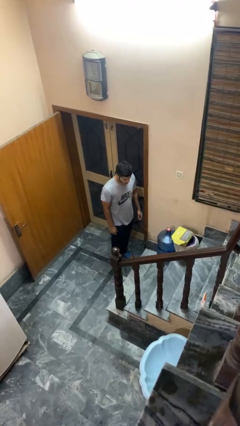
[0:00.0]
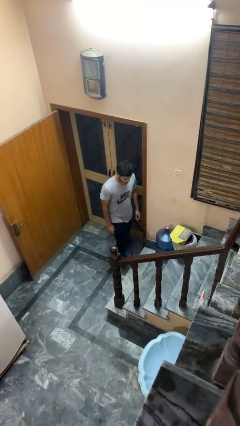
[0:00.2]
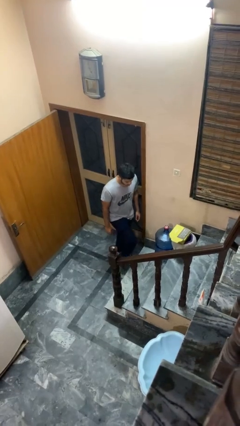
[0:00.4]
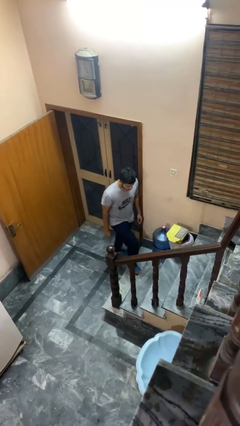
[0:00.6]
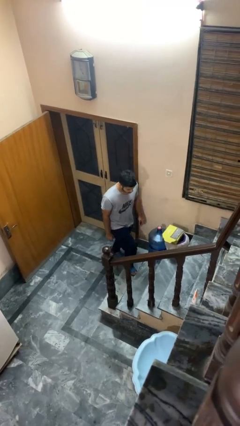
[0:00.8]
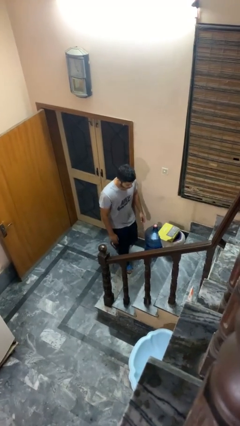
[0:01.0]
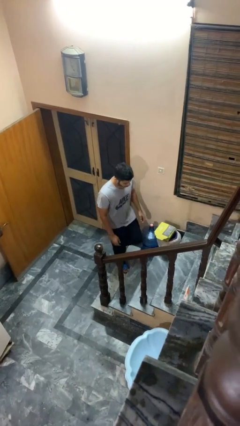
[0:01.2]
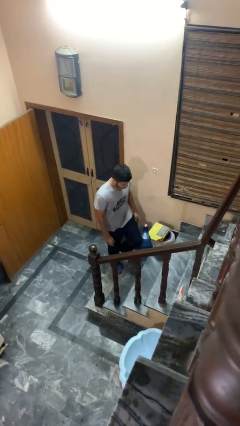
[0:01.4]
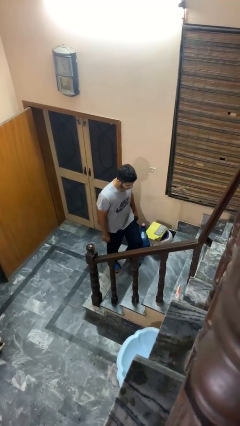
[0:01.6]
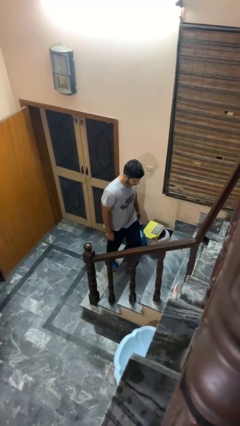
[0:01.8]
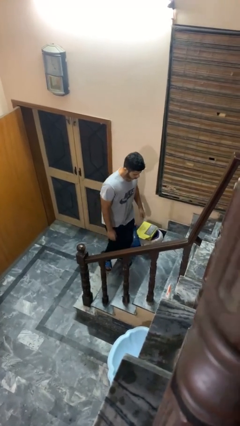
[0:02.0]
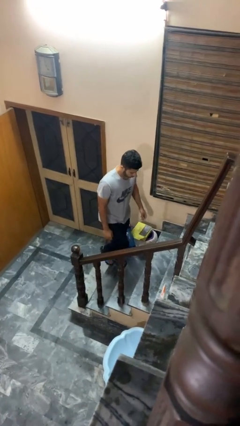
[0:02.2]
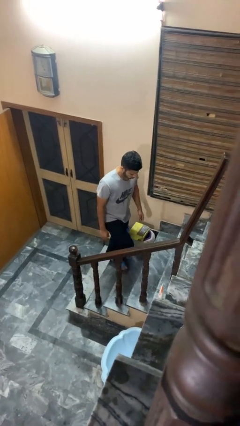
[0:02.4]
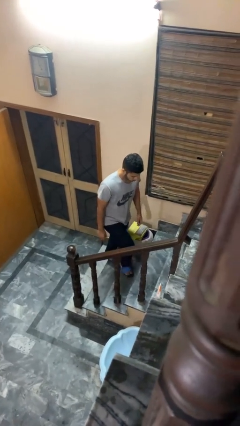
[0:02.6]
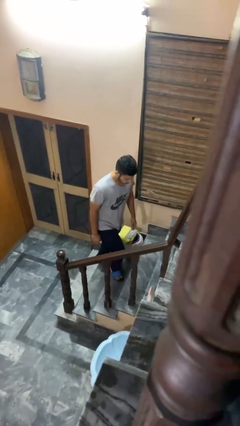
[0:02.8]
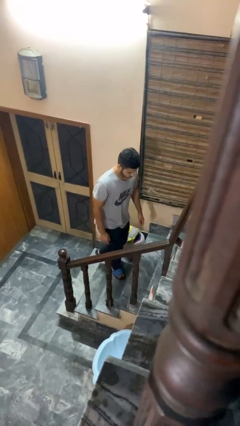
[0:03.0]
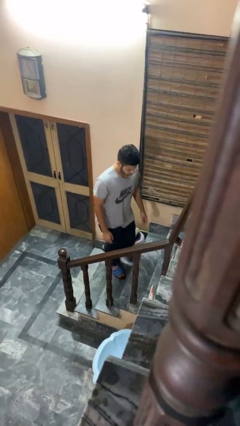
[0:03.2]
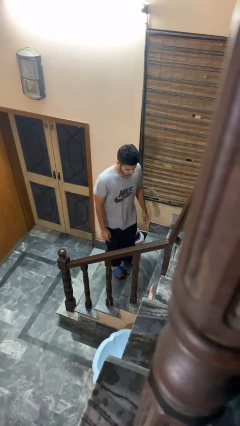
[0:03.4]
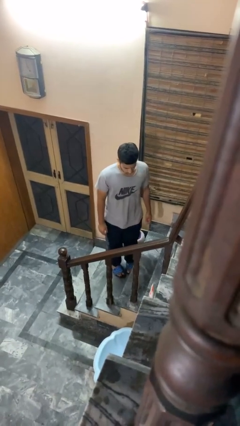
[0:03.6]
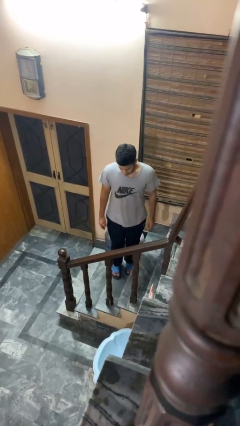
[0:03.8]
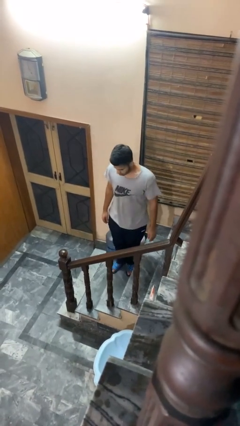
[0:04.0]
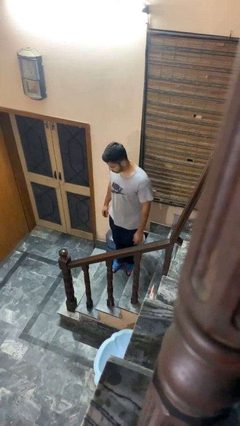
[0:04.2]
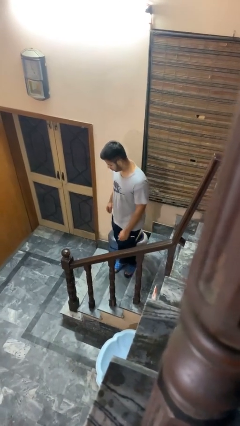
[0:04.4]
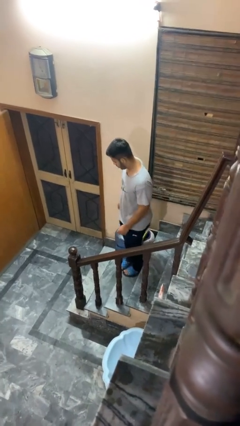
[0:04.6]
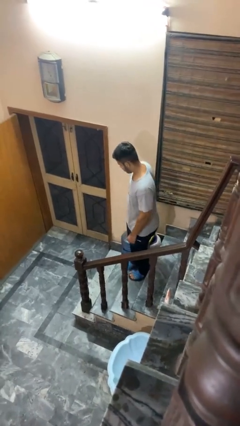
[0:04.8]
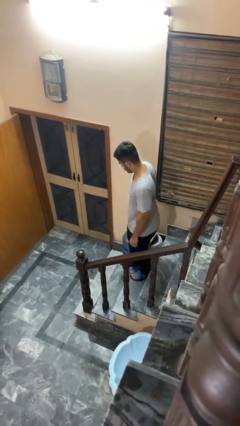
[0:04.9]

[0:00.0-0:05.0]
person climbs up stairs

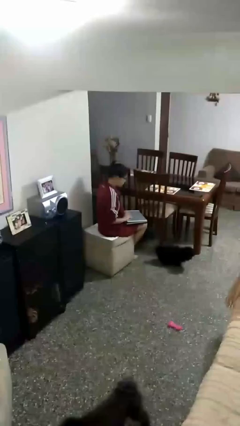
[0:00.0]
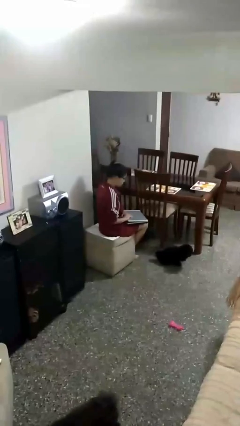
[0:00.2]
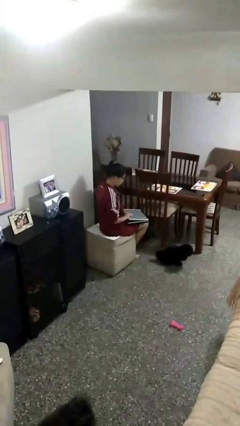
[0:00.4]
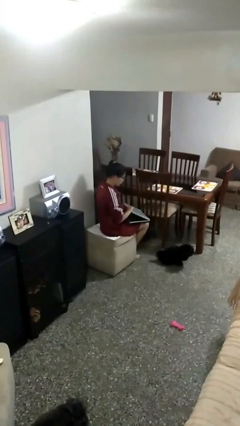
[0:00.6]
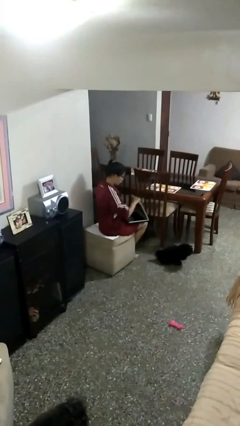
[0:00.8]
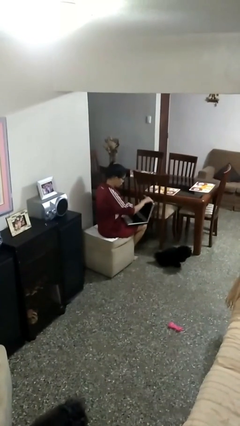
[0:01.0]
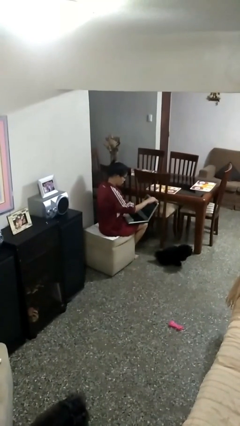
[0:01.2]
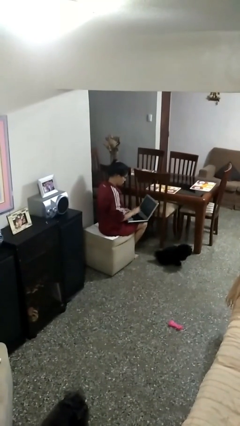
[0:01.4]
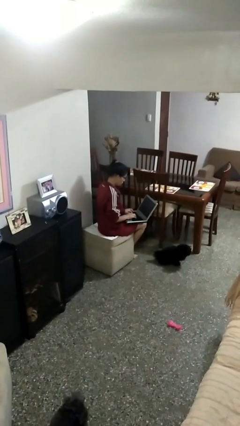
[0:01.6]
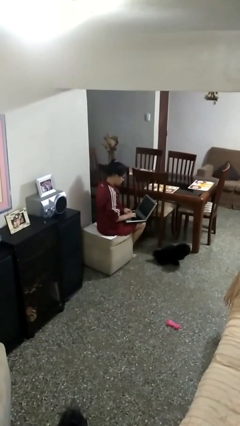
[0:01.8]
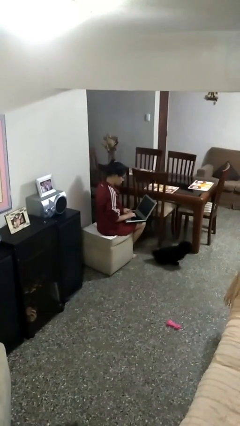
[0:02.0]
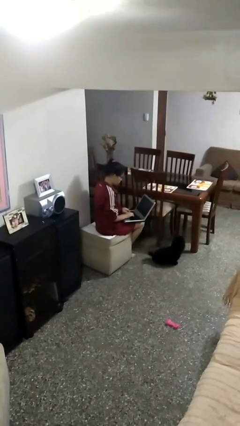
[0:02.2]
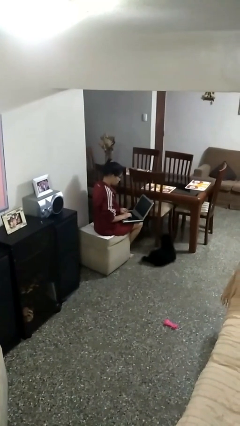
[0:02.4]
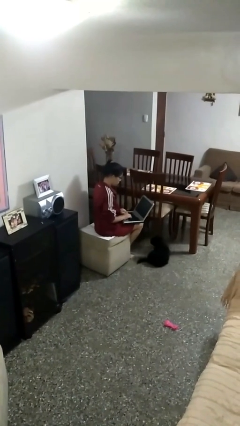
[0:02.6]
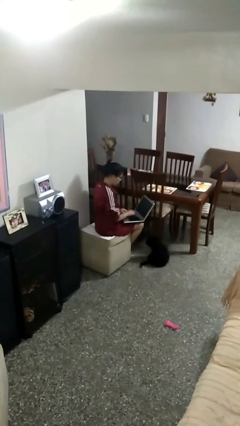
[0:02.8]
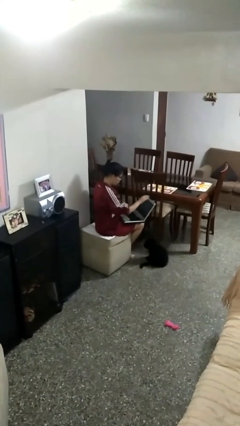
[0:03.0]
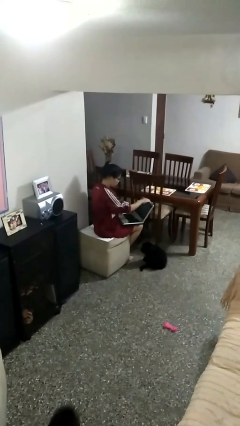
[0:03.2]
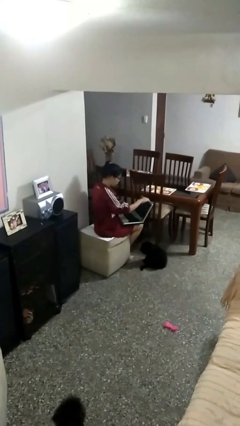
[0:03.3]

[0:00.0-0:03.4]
person interacts with laptop

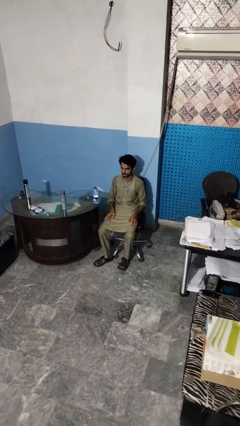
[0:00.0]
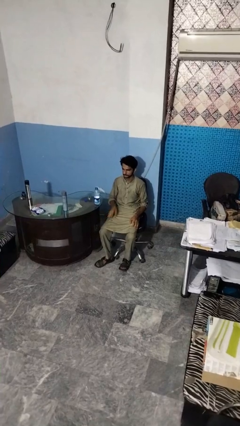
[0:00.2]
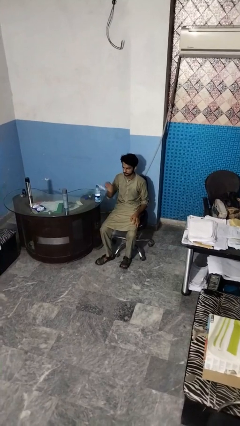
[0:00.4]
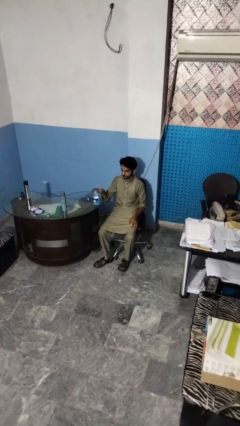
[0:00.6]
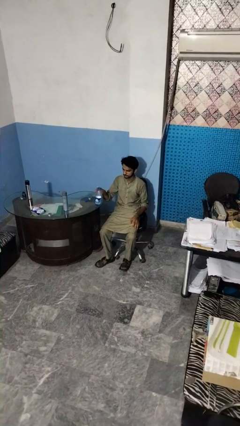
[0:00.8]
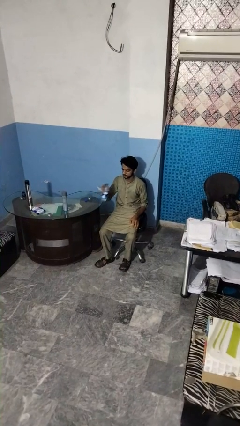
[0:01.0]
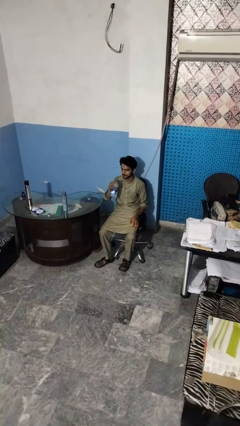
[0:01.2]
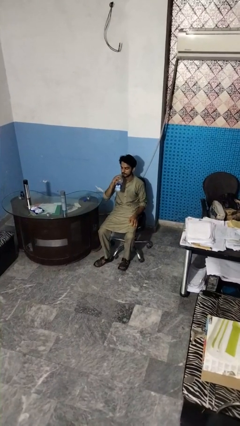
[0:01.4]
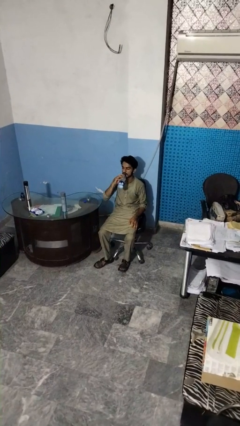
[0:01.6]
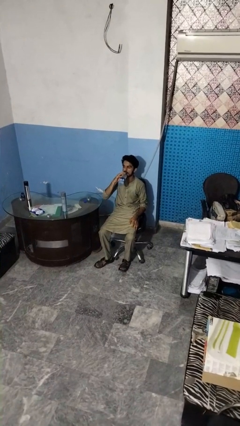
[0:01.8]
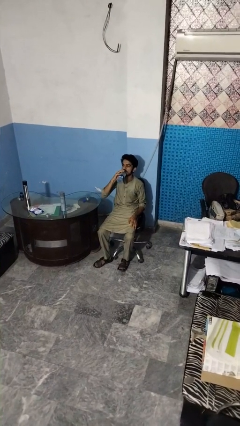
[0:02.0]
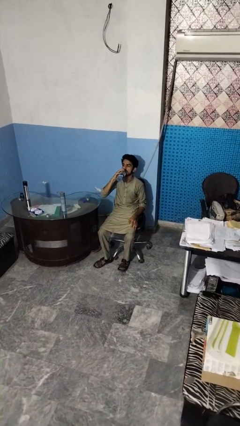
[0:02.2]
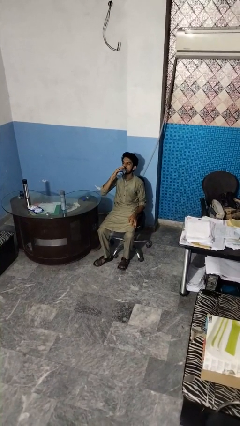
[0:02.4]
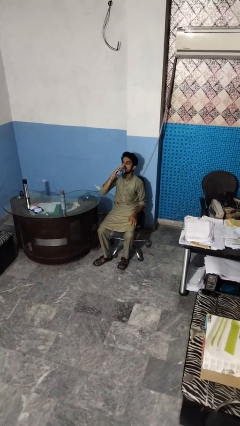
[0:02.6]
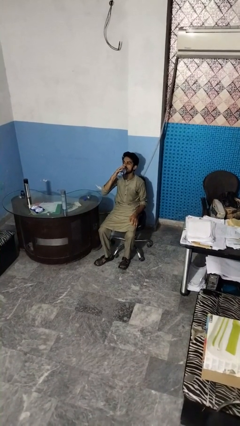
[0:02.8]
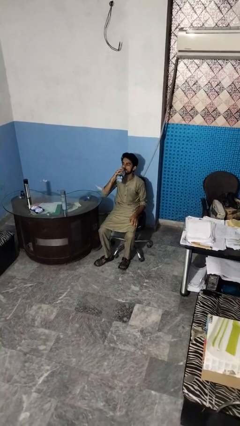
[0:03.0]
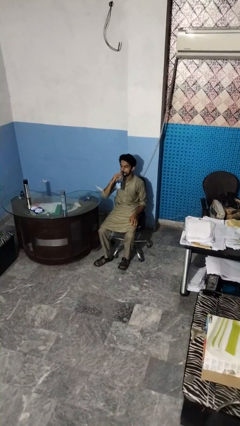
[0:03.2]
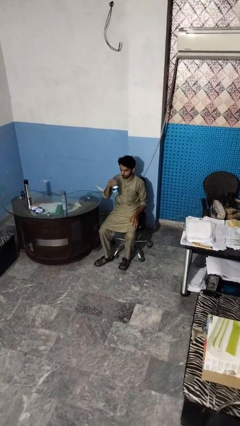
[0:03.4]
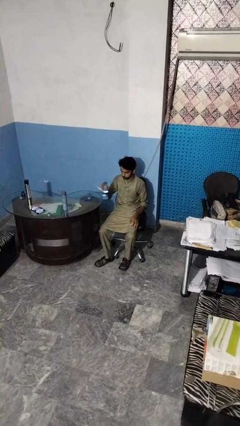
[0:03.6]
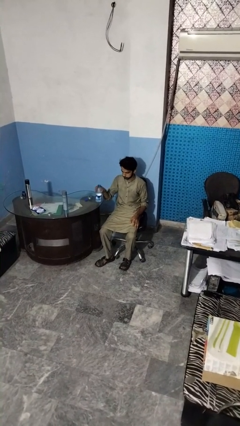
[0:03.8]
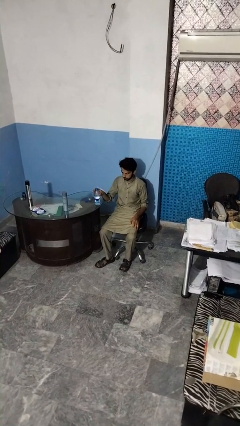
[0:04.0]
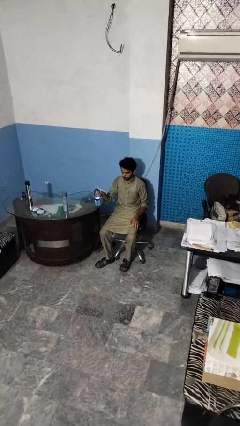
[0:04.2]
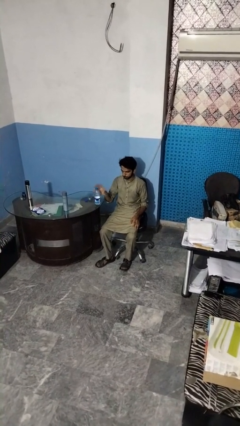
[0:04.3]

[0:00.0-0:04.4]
person drinks from bottle

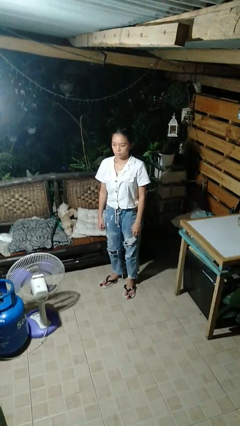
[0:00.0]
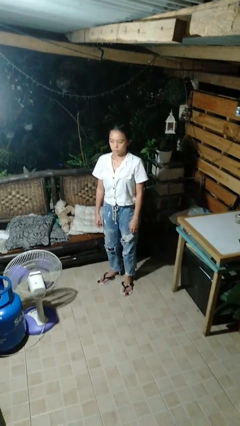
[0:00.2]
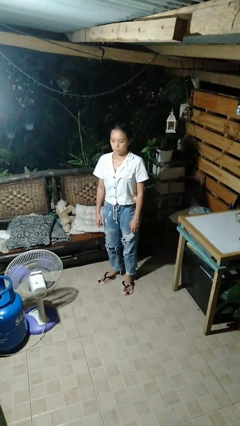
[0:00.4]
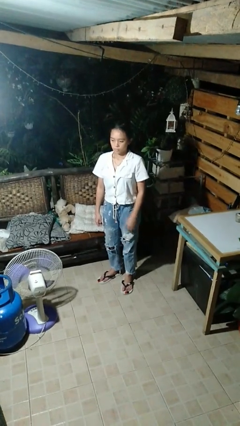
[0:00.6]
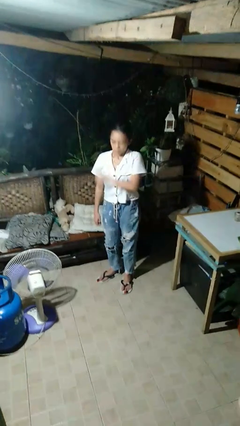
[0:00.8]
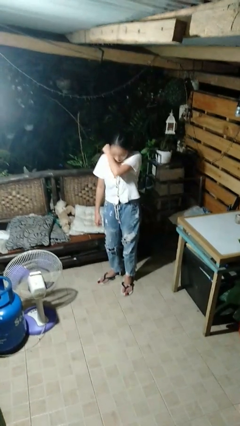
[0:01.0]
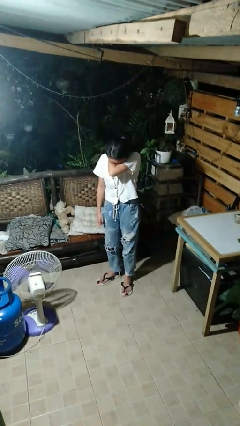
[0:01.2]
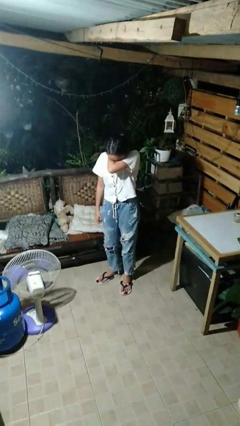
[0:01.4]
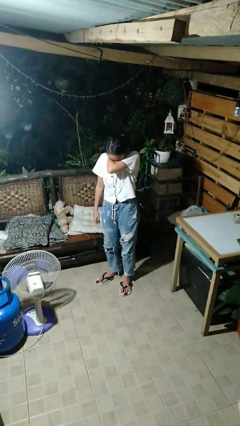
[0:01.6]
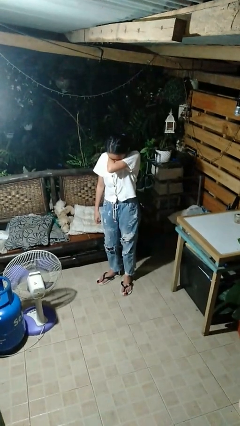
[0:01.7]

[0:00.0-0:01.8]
person sneezes into arm

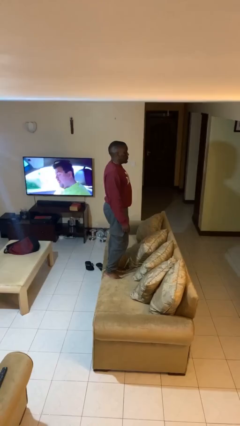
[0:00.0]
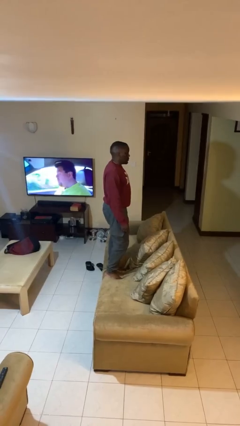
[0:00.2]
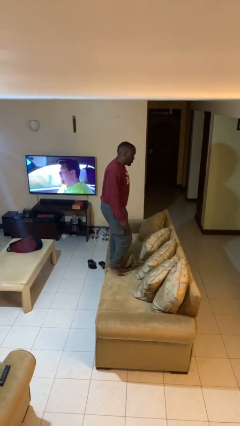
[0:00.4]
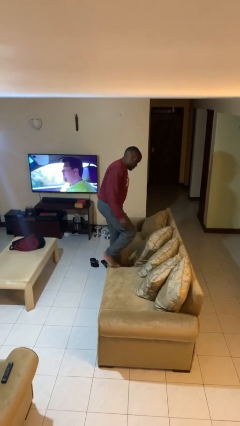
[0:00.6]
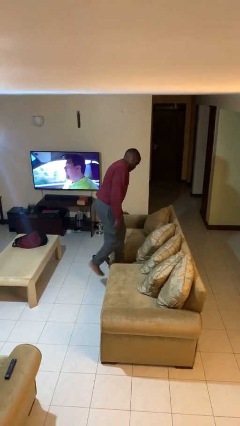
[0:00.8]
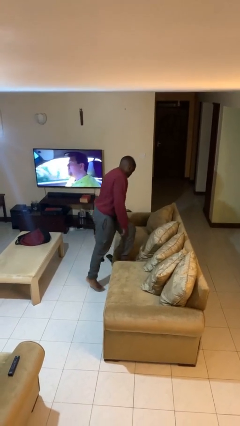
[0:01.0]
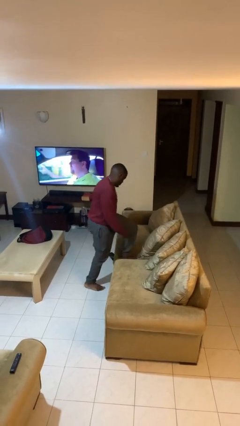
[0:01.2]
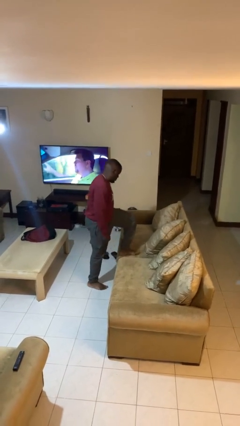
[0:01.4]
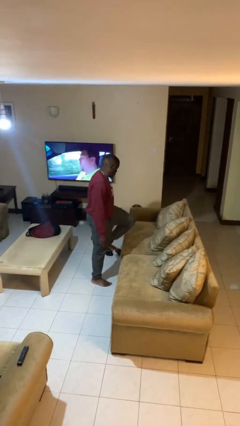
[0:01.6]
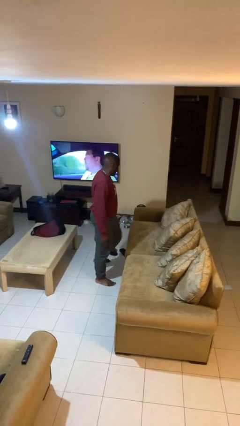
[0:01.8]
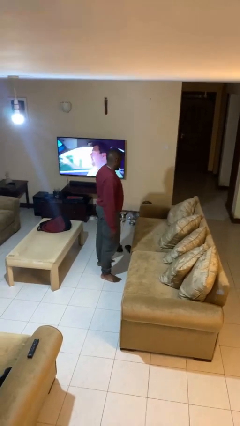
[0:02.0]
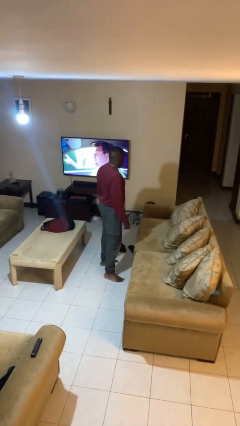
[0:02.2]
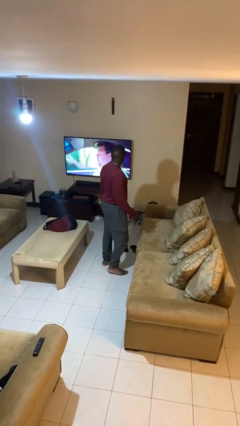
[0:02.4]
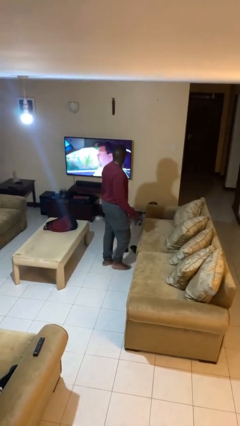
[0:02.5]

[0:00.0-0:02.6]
person climbs off couch

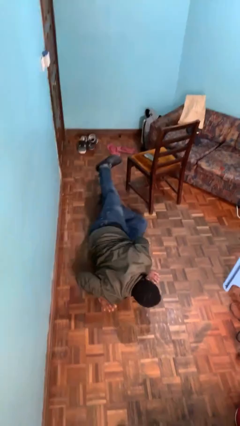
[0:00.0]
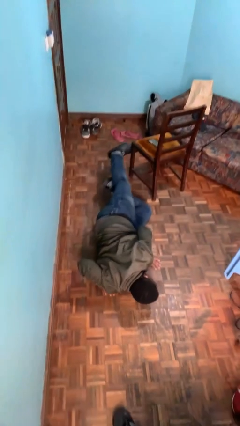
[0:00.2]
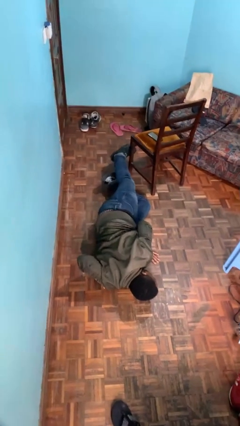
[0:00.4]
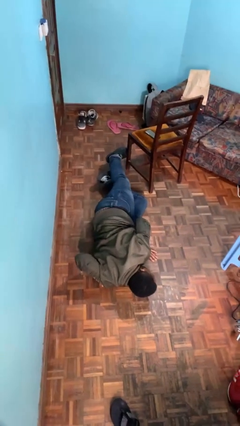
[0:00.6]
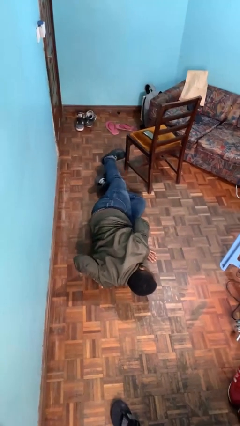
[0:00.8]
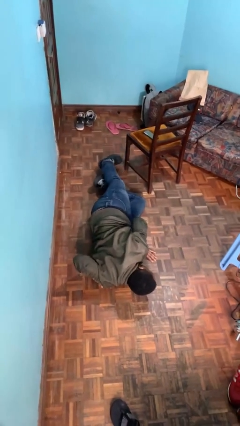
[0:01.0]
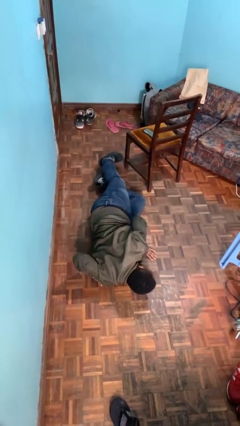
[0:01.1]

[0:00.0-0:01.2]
person lies down on floor
